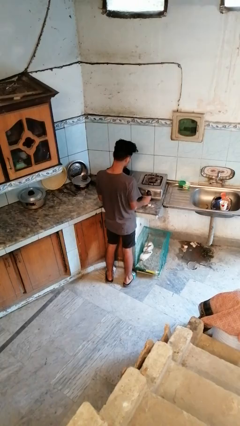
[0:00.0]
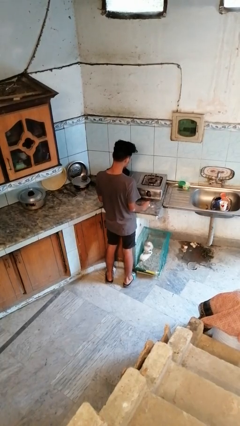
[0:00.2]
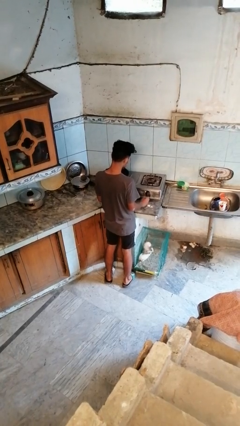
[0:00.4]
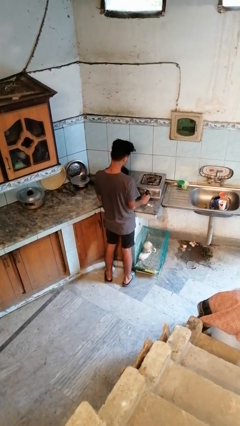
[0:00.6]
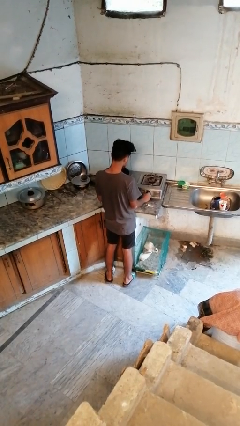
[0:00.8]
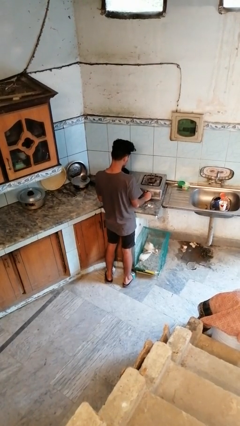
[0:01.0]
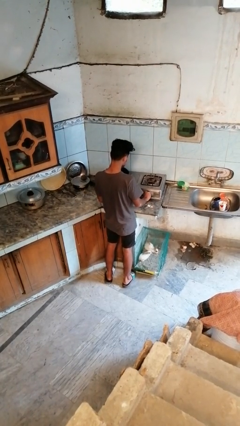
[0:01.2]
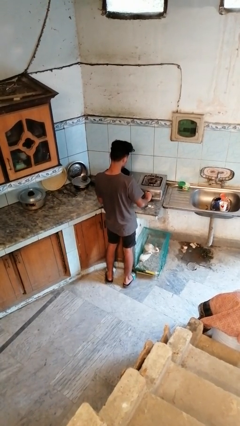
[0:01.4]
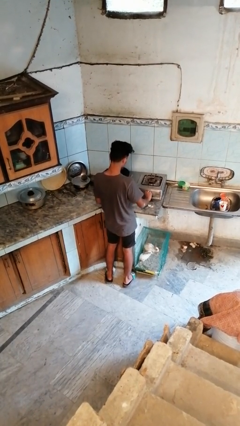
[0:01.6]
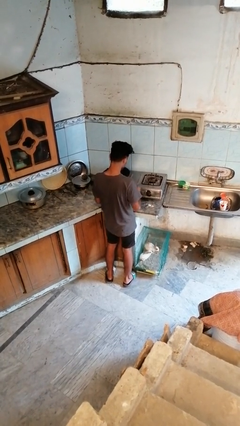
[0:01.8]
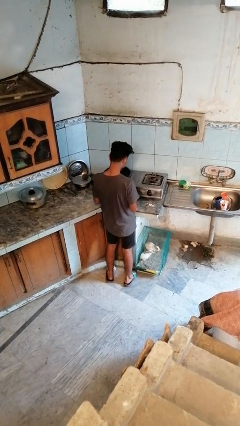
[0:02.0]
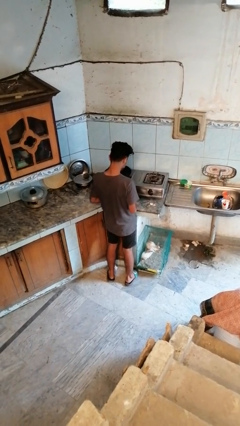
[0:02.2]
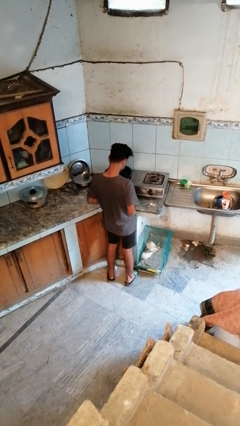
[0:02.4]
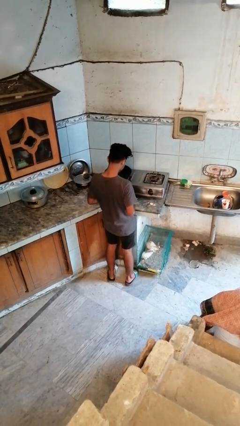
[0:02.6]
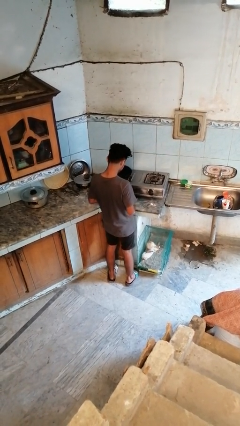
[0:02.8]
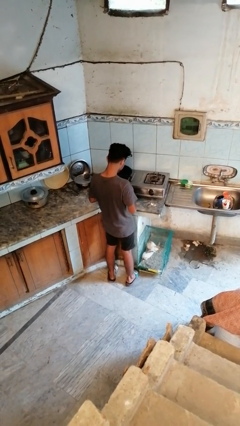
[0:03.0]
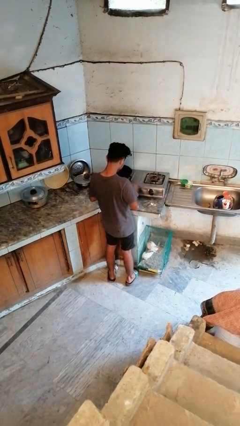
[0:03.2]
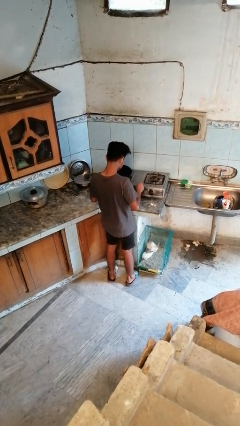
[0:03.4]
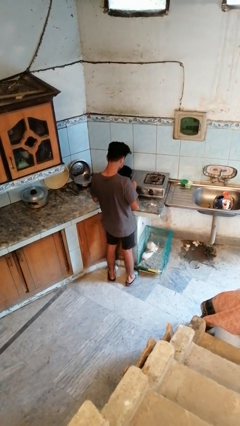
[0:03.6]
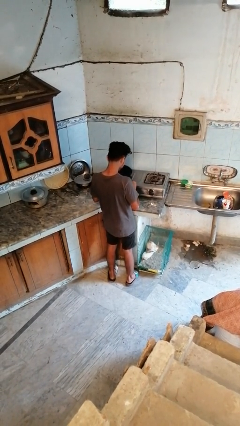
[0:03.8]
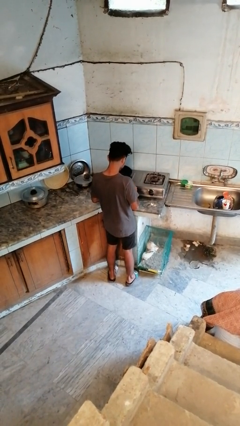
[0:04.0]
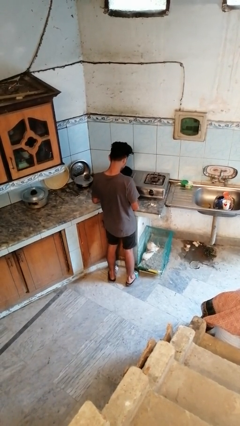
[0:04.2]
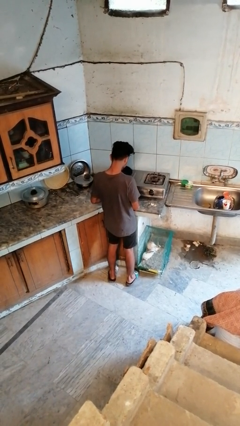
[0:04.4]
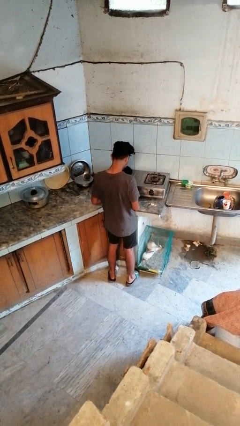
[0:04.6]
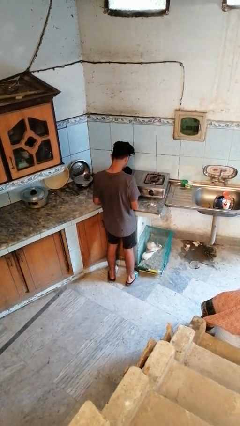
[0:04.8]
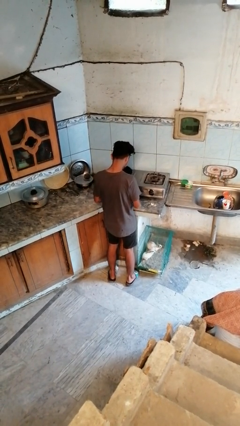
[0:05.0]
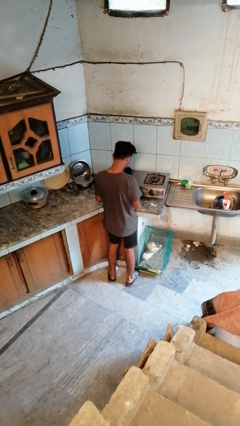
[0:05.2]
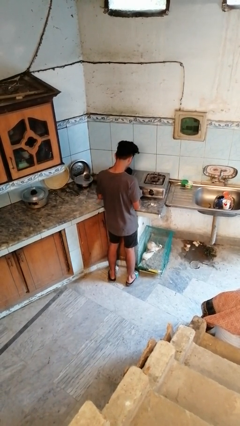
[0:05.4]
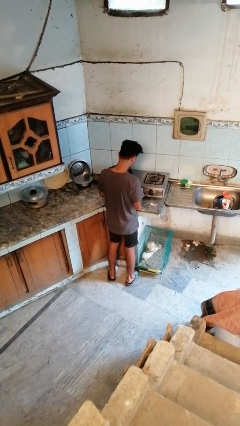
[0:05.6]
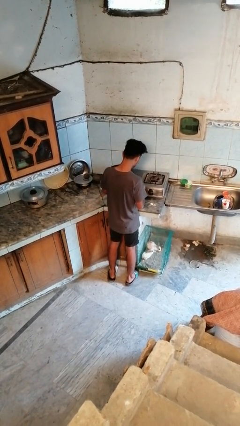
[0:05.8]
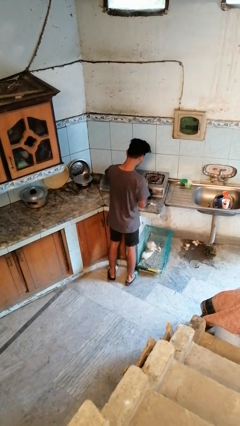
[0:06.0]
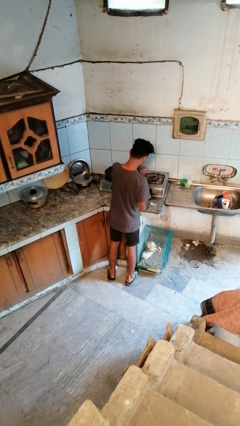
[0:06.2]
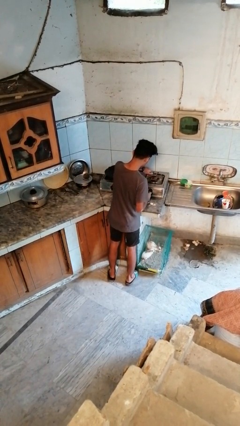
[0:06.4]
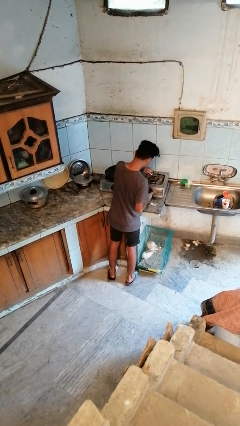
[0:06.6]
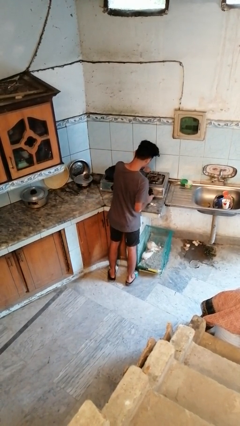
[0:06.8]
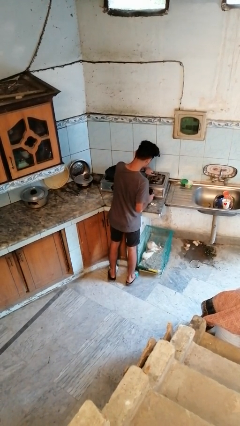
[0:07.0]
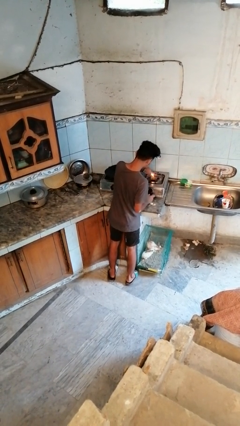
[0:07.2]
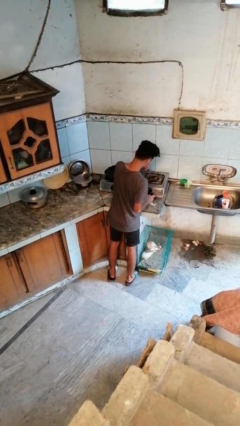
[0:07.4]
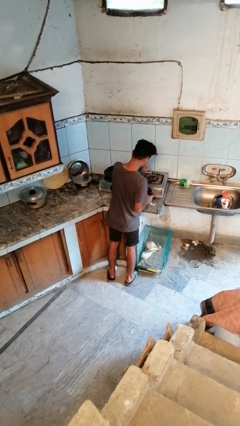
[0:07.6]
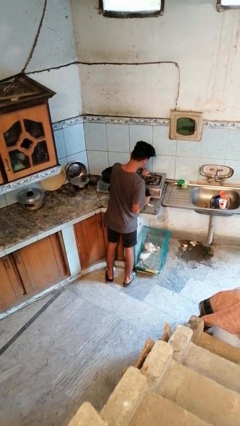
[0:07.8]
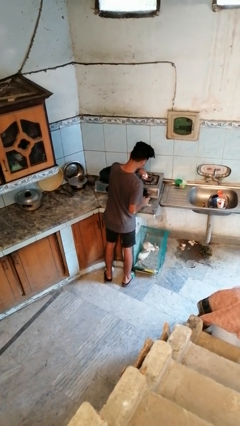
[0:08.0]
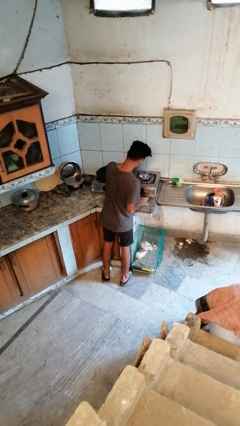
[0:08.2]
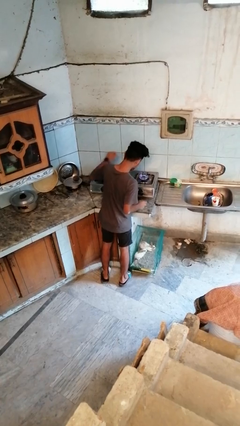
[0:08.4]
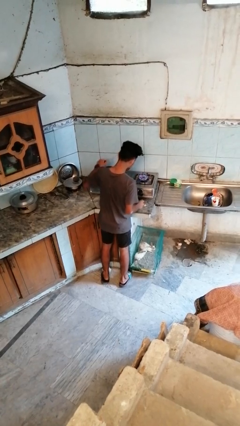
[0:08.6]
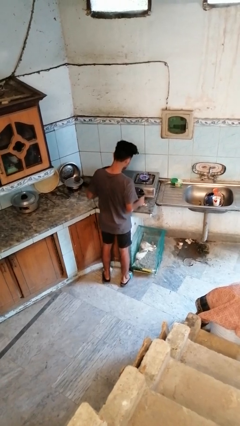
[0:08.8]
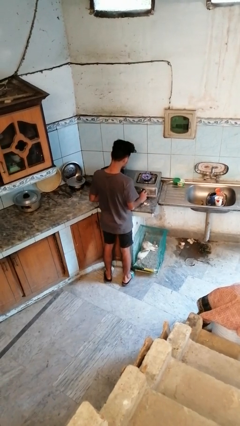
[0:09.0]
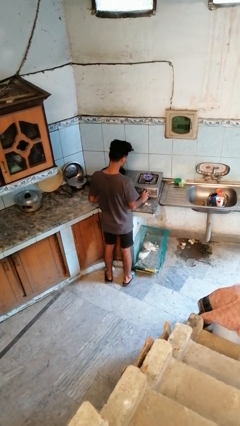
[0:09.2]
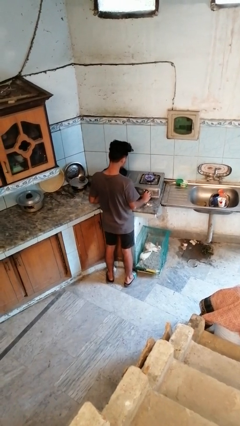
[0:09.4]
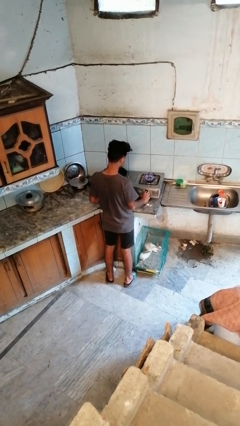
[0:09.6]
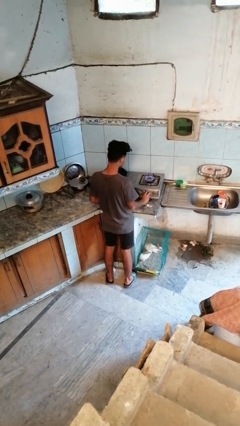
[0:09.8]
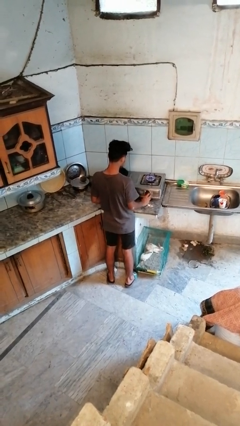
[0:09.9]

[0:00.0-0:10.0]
person turns on stovetop

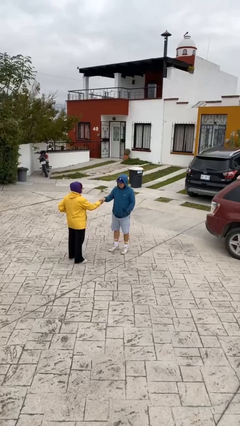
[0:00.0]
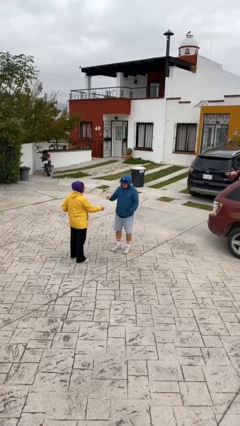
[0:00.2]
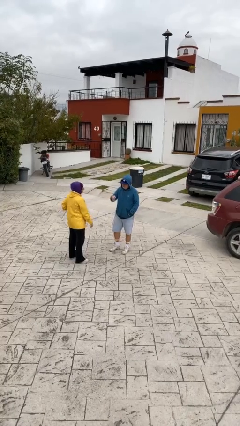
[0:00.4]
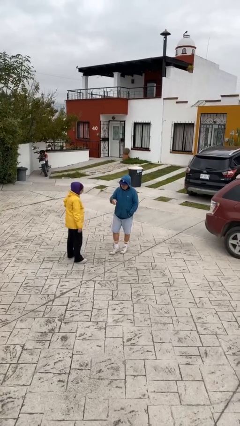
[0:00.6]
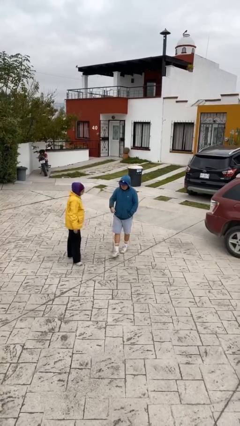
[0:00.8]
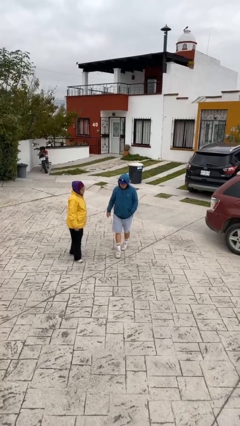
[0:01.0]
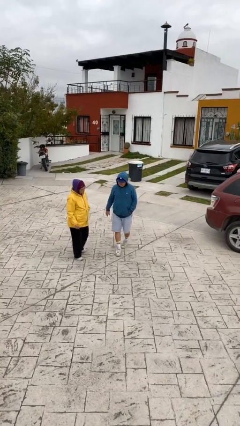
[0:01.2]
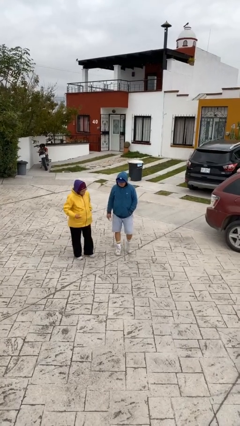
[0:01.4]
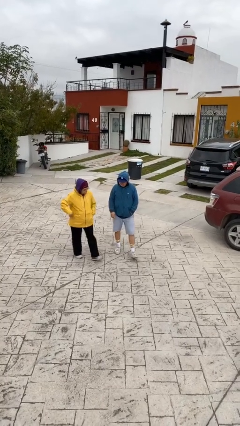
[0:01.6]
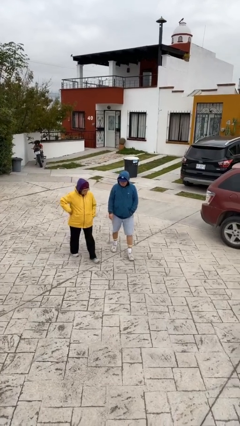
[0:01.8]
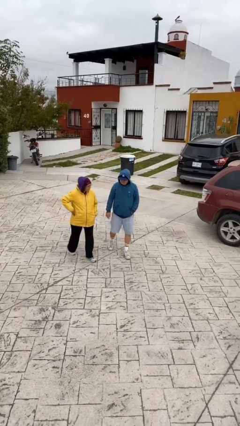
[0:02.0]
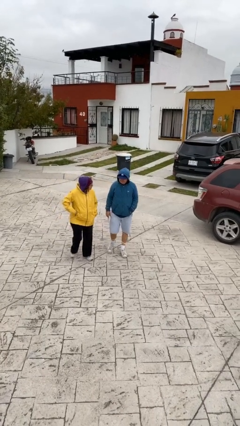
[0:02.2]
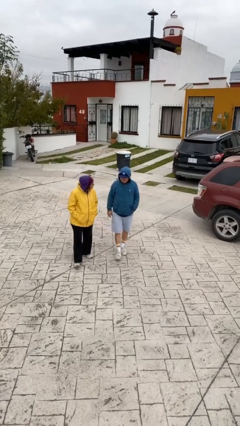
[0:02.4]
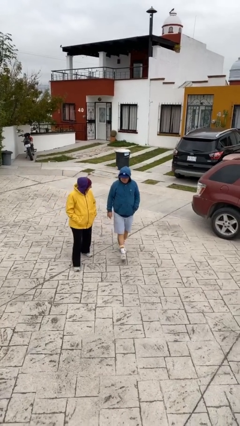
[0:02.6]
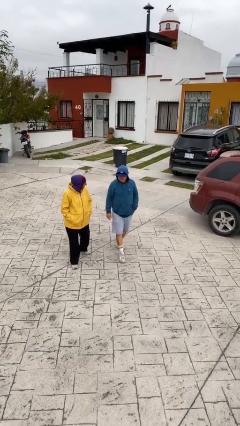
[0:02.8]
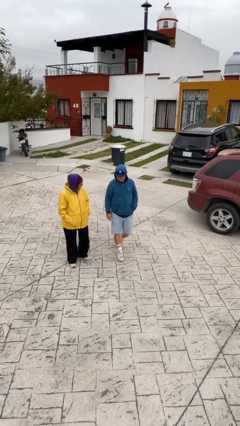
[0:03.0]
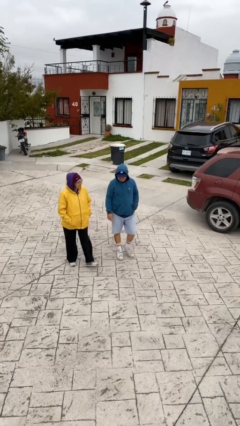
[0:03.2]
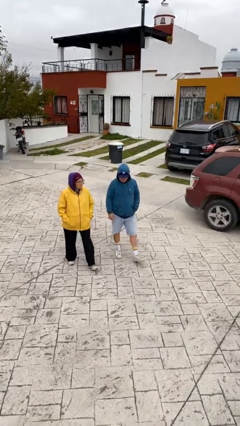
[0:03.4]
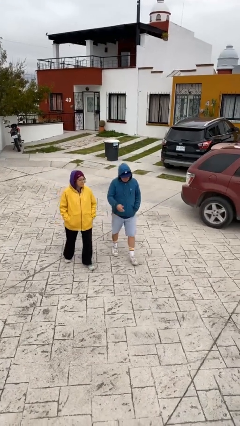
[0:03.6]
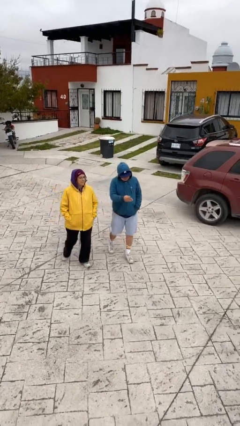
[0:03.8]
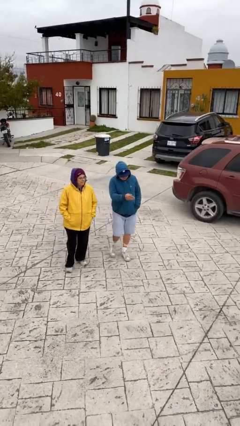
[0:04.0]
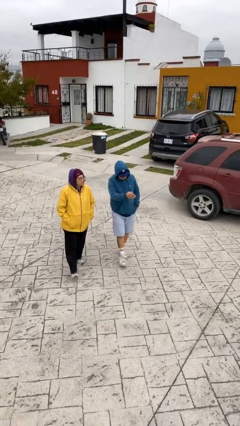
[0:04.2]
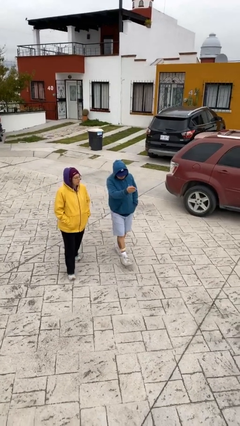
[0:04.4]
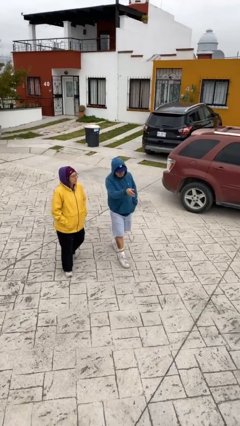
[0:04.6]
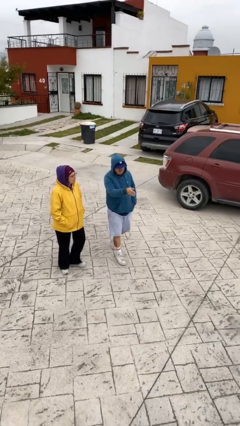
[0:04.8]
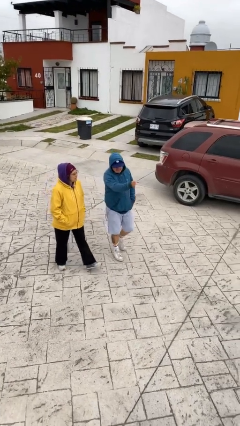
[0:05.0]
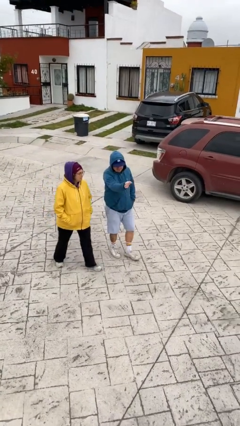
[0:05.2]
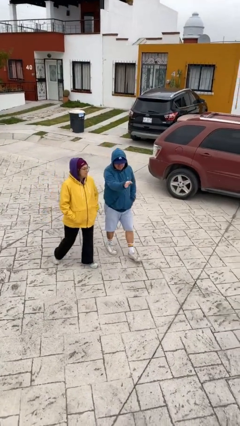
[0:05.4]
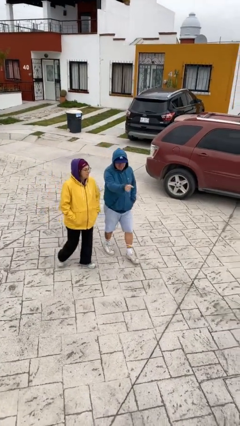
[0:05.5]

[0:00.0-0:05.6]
person talks to person

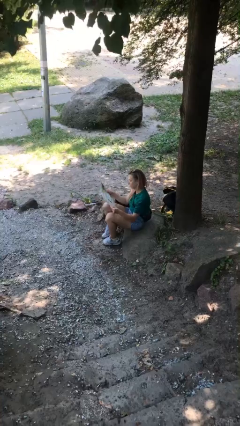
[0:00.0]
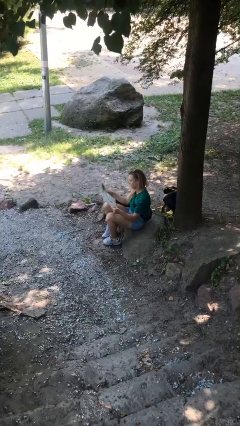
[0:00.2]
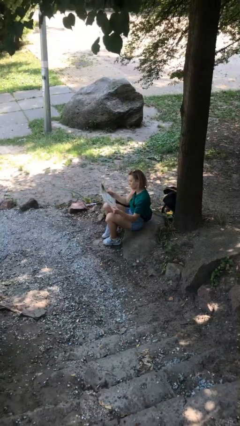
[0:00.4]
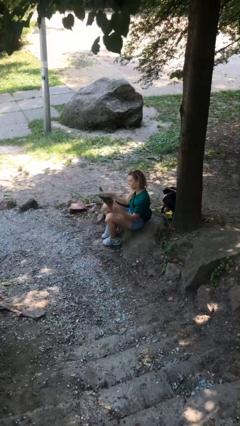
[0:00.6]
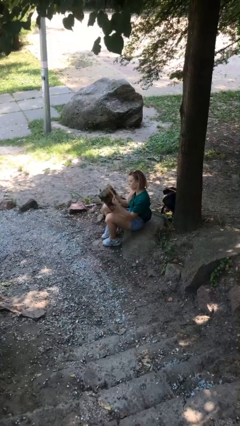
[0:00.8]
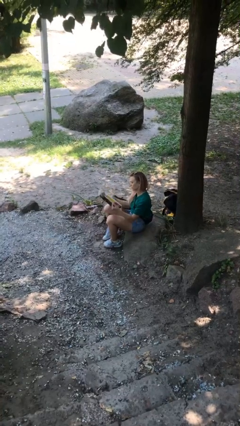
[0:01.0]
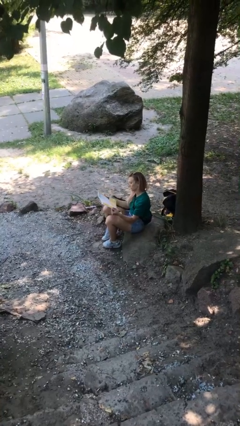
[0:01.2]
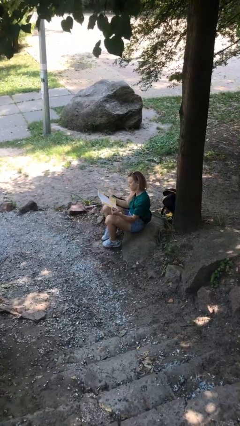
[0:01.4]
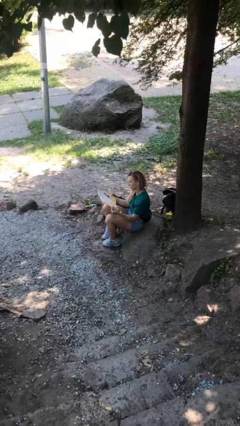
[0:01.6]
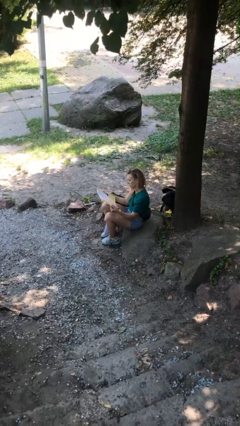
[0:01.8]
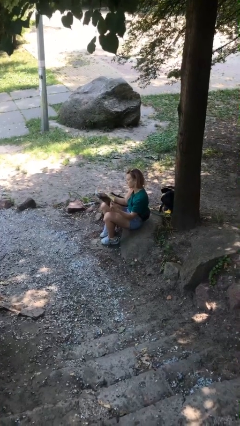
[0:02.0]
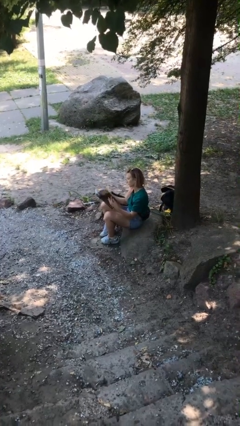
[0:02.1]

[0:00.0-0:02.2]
person reads magazine
